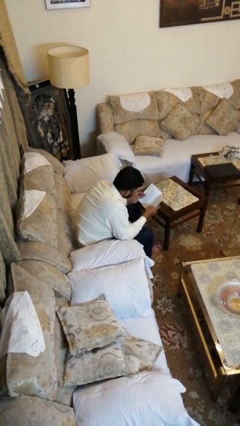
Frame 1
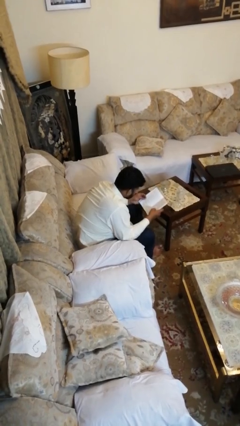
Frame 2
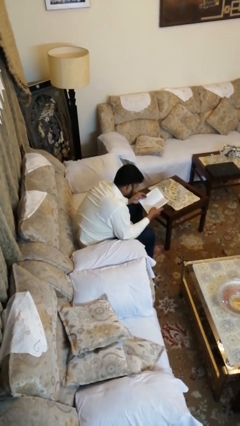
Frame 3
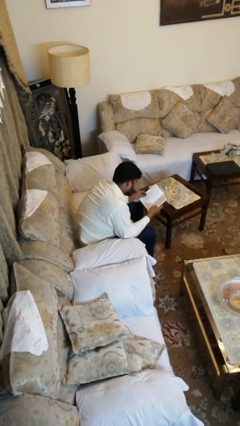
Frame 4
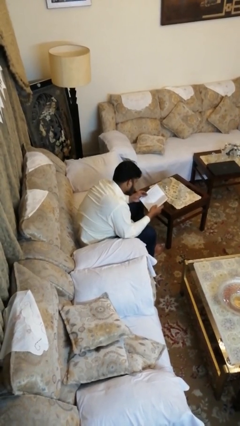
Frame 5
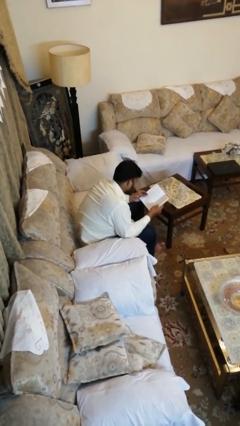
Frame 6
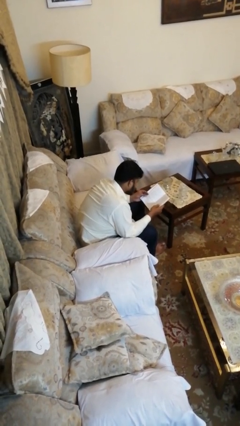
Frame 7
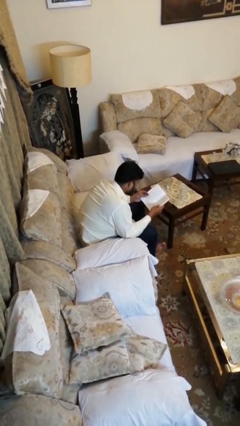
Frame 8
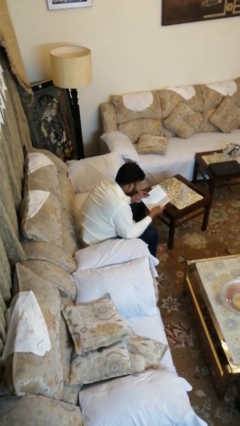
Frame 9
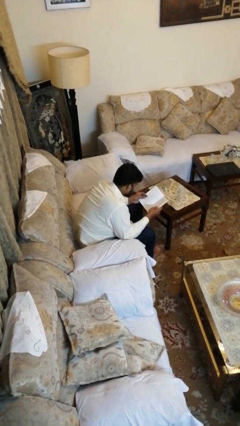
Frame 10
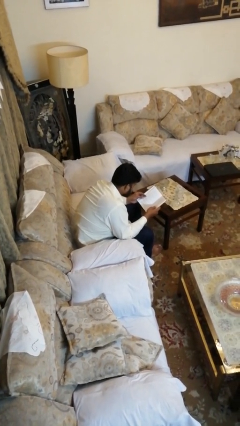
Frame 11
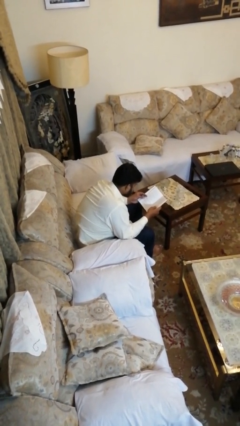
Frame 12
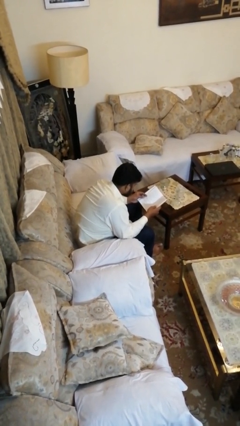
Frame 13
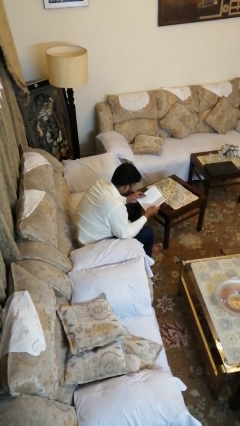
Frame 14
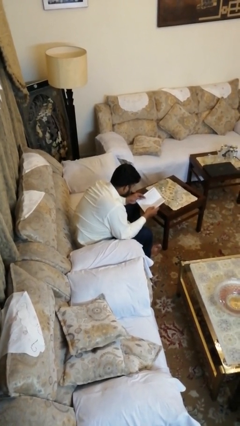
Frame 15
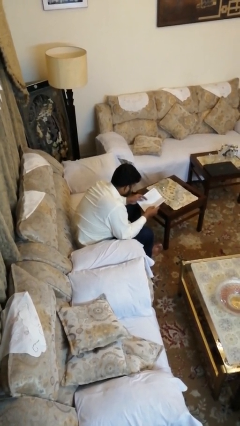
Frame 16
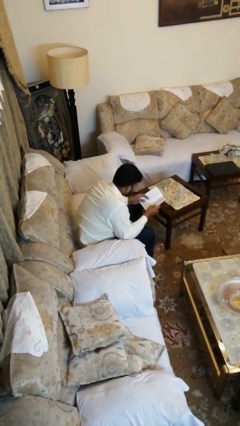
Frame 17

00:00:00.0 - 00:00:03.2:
person reads book

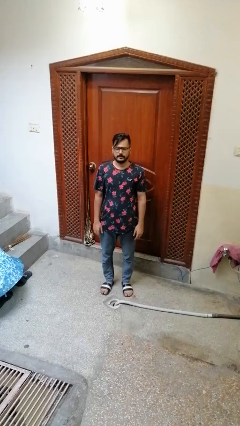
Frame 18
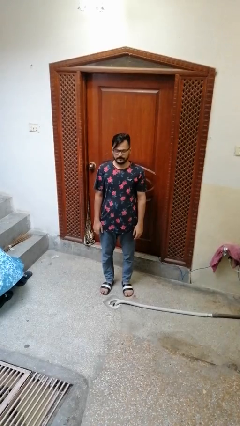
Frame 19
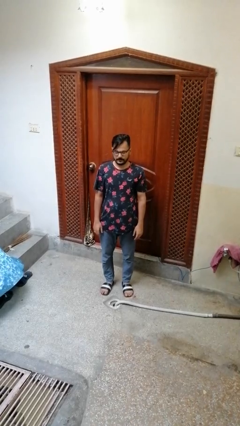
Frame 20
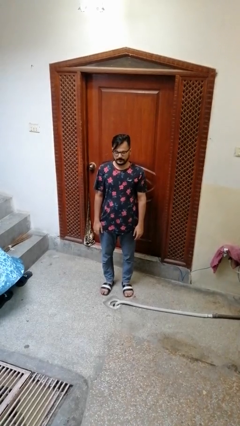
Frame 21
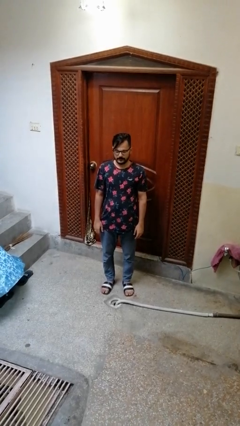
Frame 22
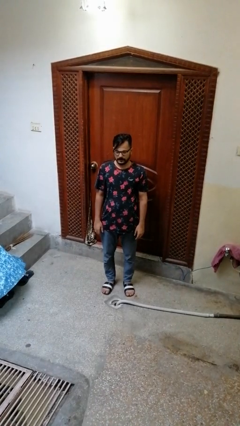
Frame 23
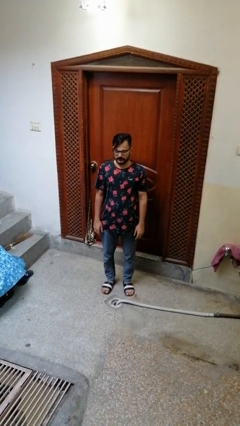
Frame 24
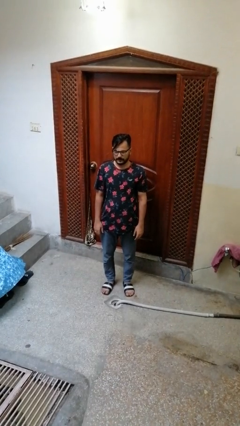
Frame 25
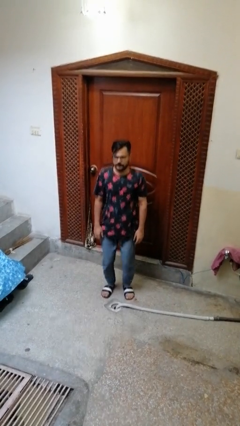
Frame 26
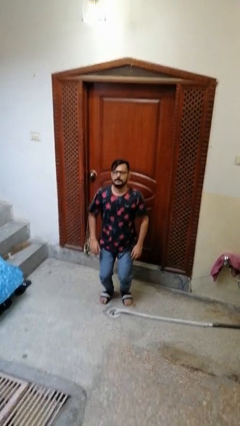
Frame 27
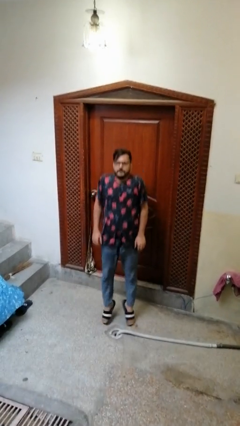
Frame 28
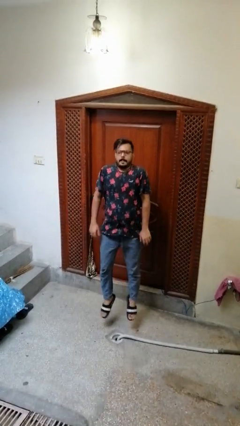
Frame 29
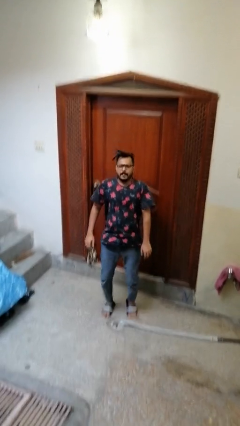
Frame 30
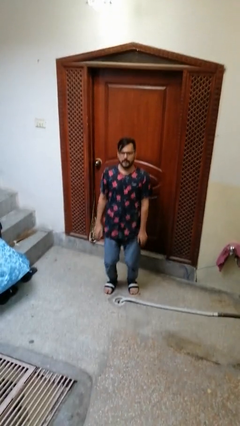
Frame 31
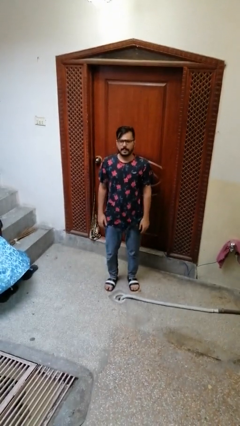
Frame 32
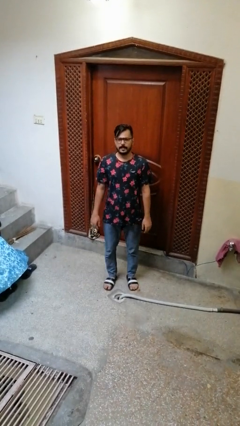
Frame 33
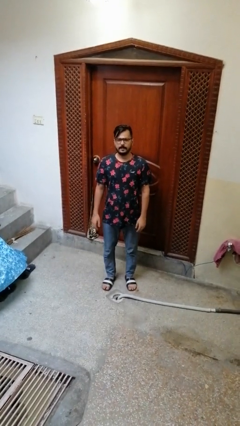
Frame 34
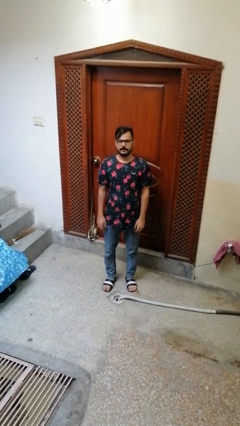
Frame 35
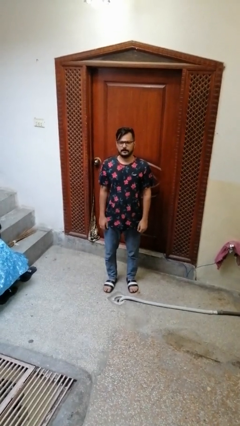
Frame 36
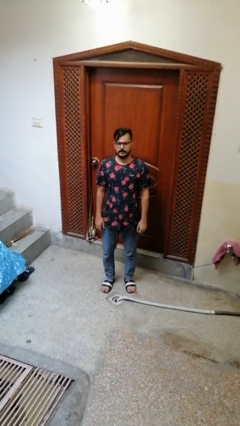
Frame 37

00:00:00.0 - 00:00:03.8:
person jumps

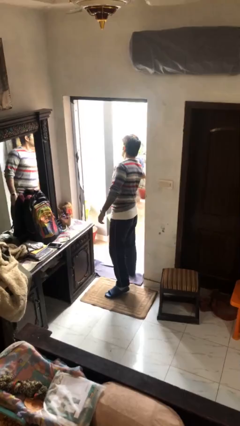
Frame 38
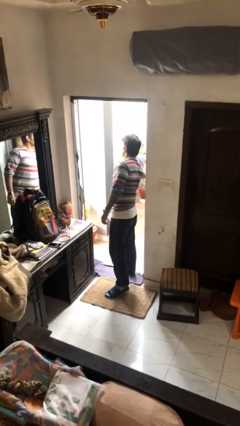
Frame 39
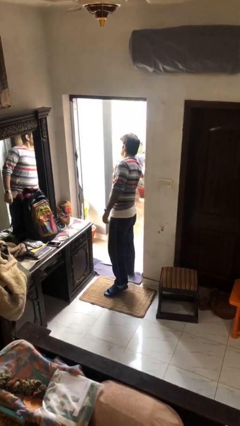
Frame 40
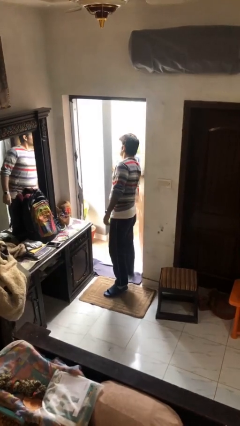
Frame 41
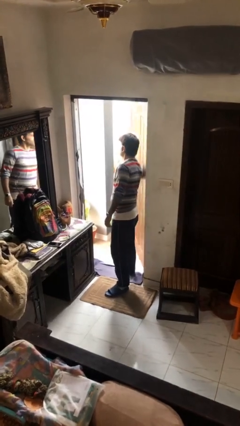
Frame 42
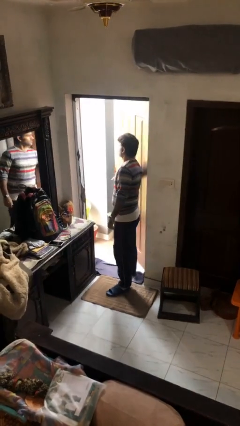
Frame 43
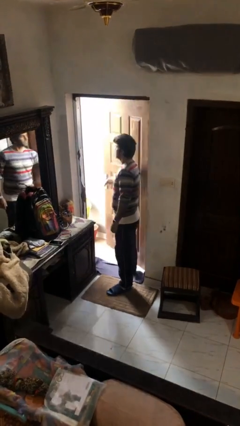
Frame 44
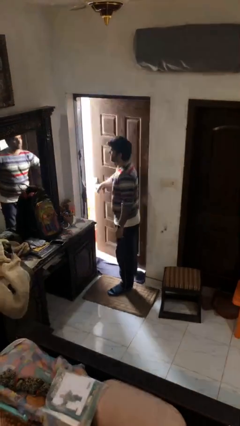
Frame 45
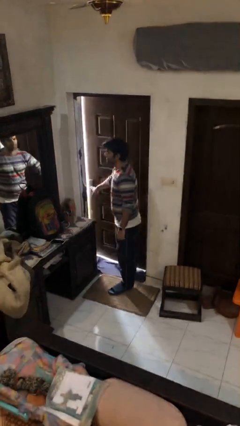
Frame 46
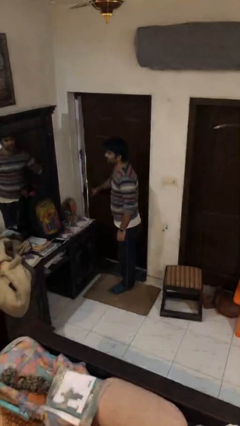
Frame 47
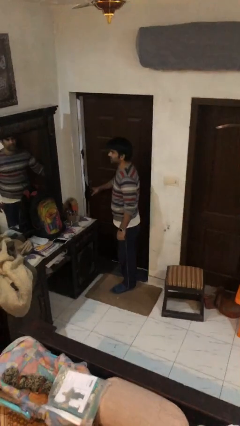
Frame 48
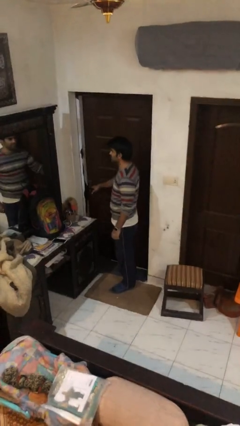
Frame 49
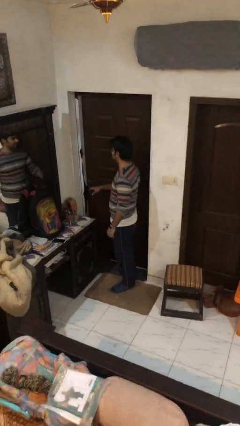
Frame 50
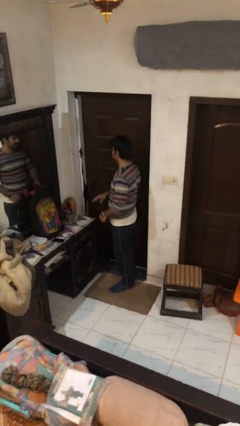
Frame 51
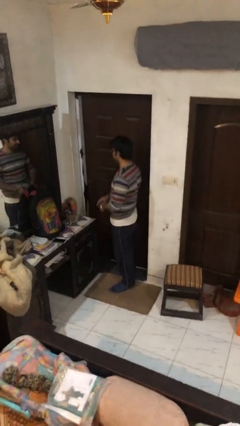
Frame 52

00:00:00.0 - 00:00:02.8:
person closes facility door

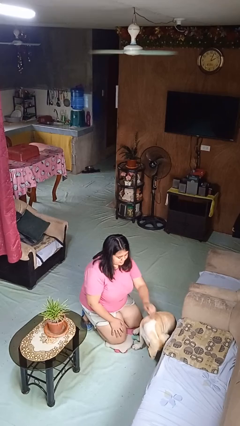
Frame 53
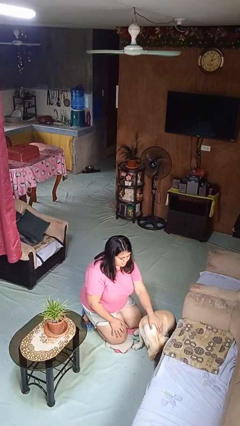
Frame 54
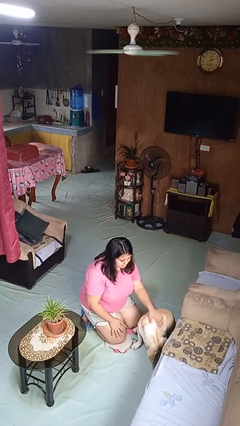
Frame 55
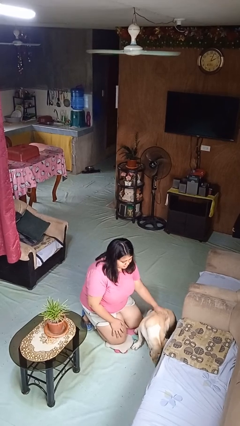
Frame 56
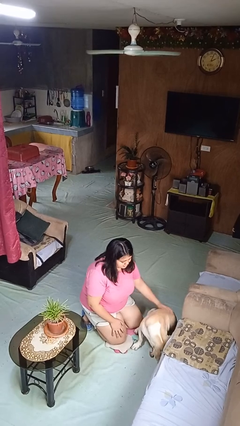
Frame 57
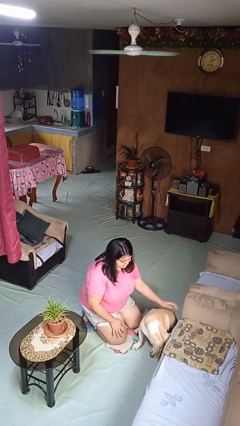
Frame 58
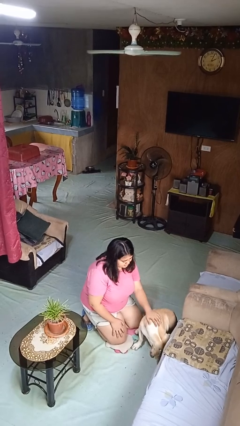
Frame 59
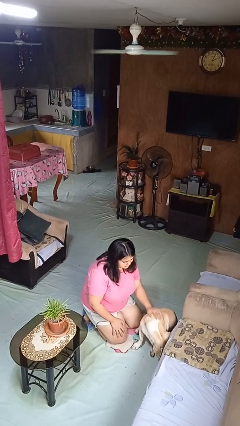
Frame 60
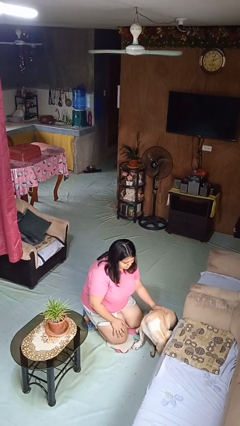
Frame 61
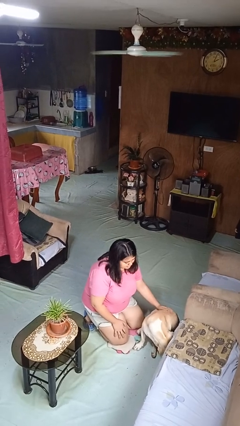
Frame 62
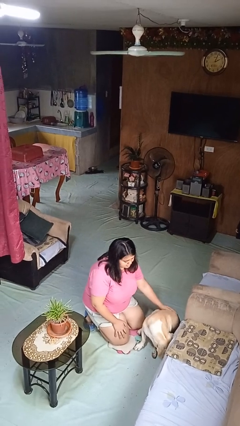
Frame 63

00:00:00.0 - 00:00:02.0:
person pets dog

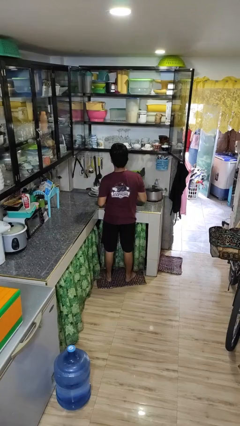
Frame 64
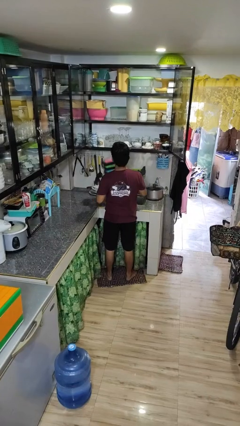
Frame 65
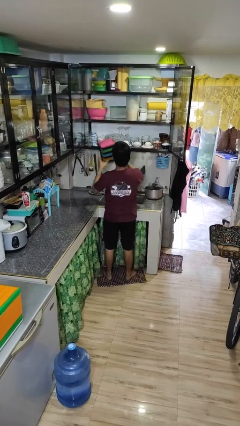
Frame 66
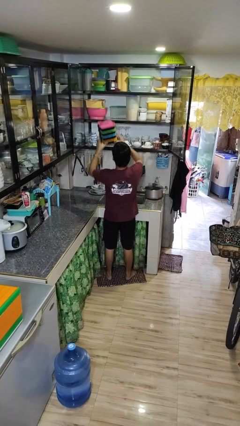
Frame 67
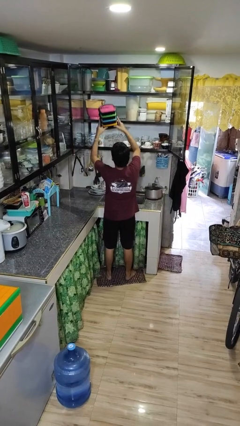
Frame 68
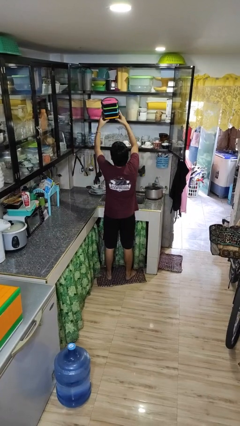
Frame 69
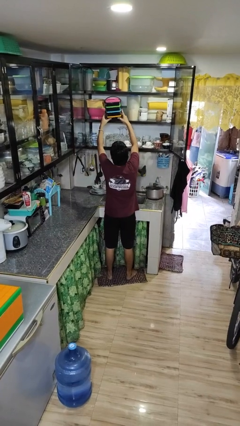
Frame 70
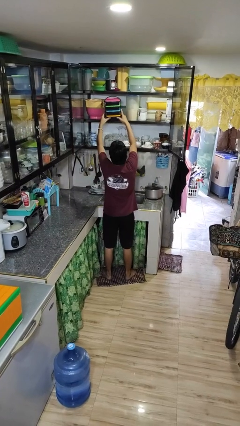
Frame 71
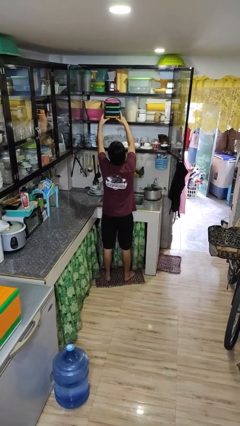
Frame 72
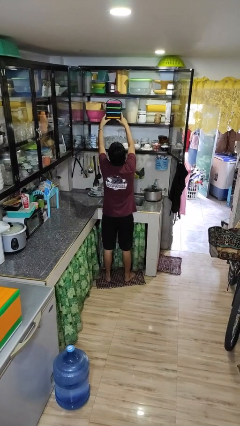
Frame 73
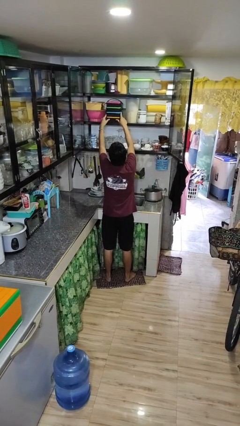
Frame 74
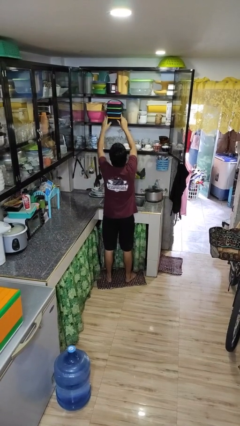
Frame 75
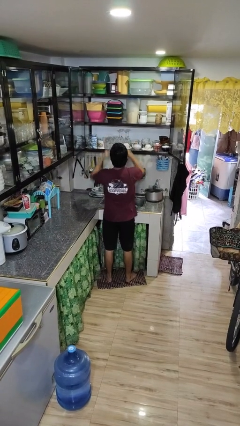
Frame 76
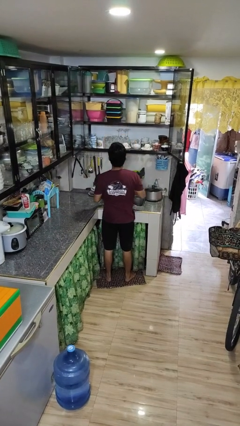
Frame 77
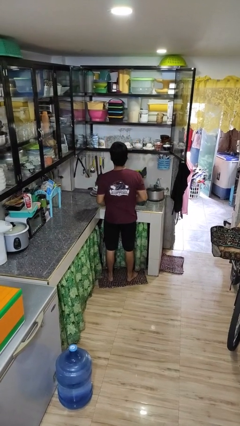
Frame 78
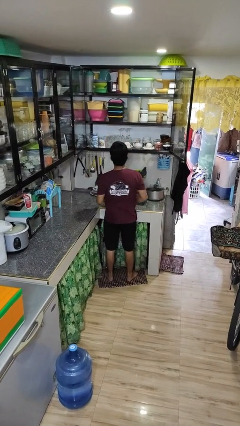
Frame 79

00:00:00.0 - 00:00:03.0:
person puts down object into cabinet

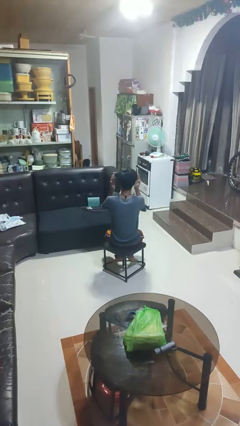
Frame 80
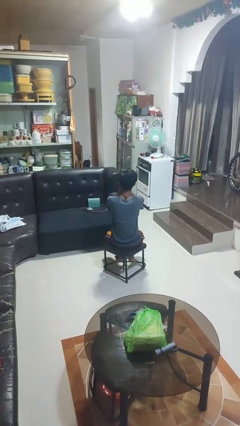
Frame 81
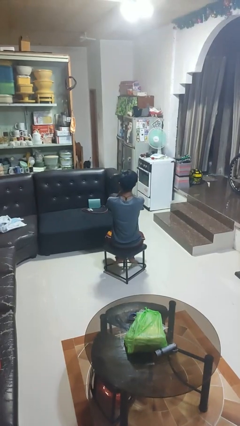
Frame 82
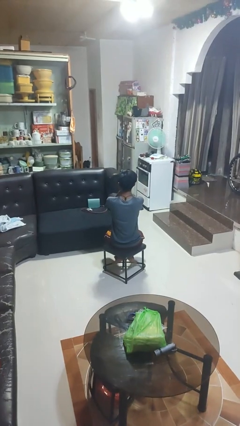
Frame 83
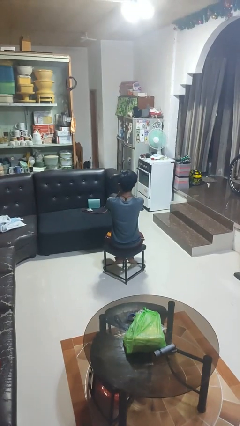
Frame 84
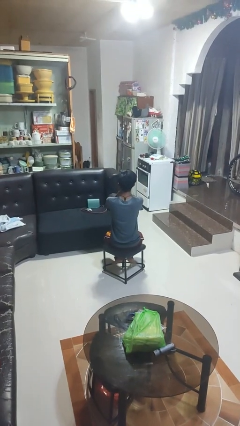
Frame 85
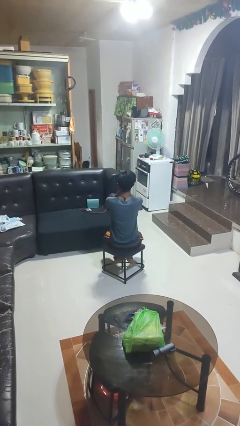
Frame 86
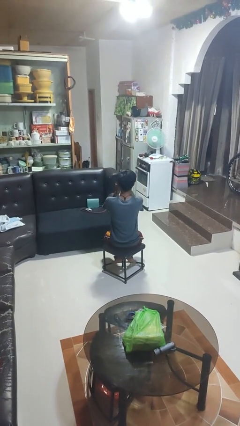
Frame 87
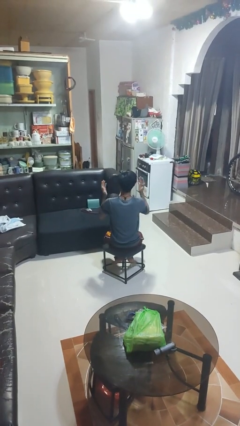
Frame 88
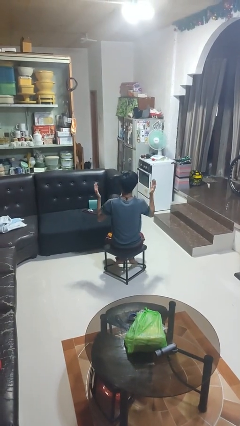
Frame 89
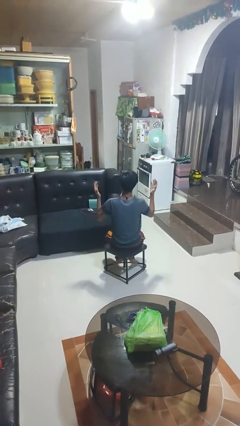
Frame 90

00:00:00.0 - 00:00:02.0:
person covers face with hands

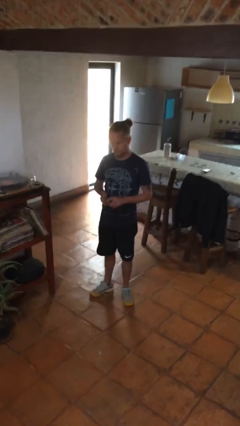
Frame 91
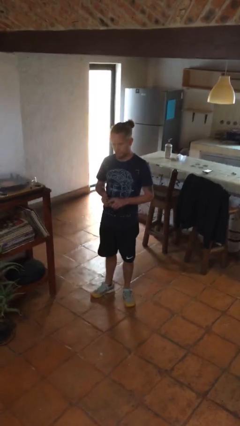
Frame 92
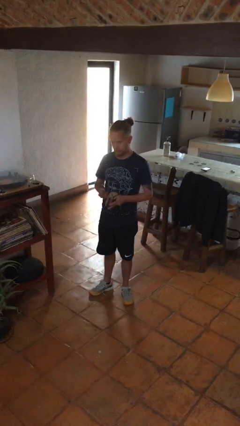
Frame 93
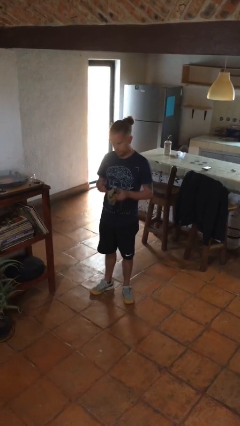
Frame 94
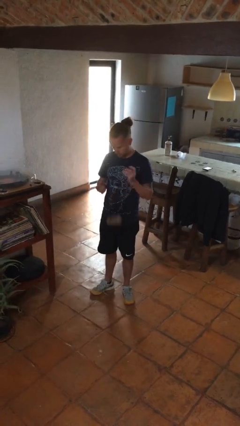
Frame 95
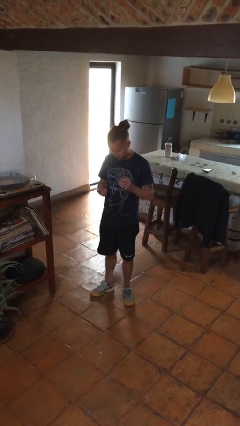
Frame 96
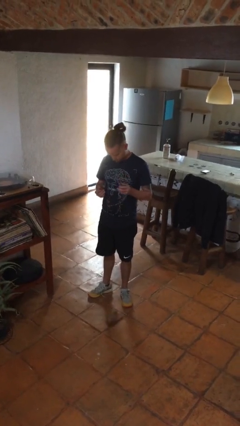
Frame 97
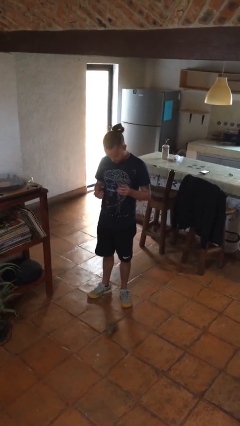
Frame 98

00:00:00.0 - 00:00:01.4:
person drops object
